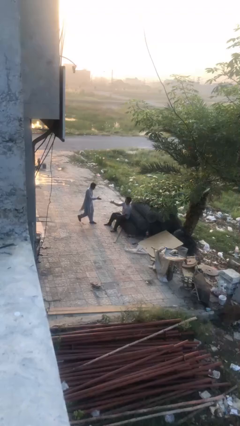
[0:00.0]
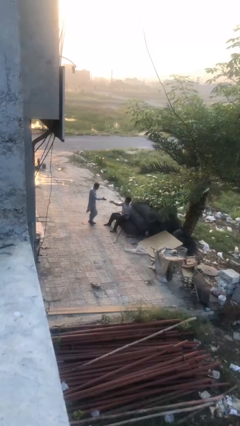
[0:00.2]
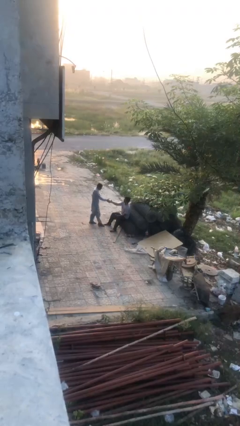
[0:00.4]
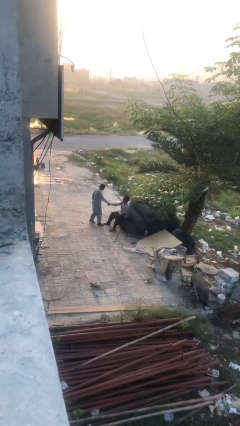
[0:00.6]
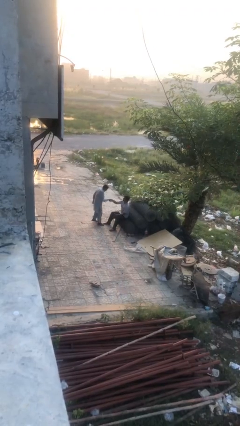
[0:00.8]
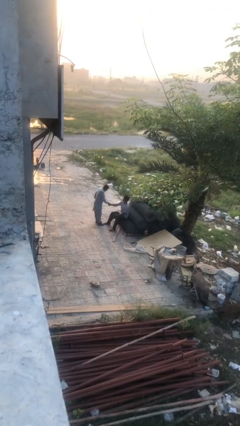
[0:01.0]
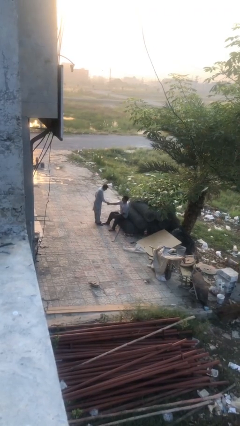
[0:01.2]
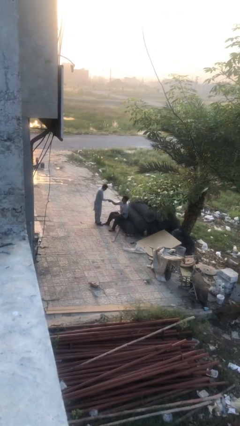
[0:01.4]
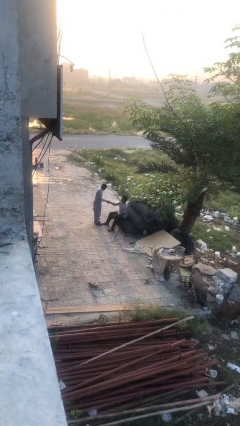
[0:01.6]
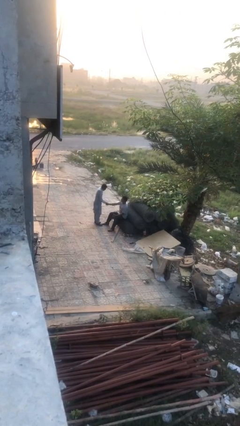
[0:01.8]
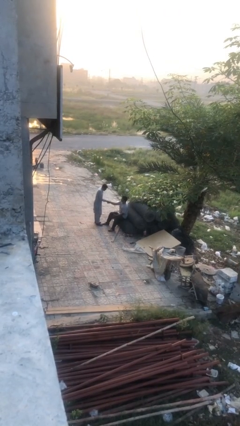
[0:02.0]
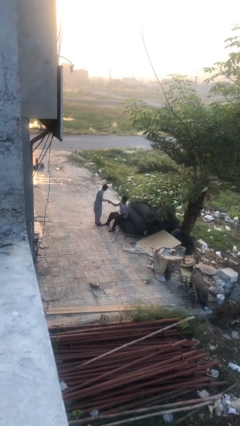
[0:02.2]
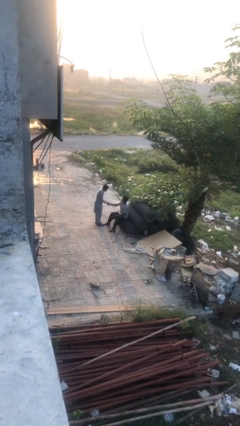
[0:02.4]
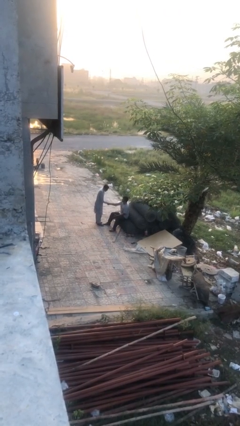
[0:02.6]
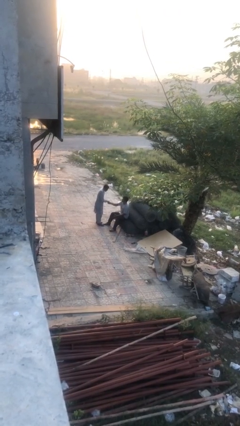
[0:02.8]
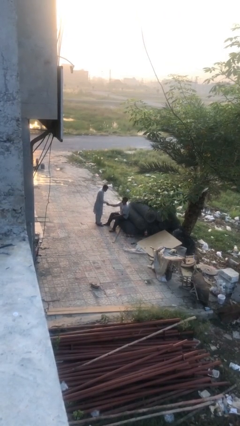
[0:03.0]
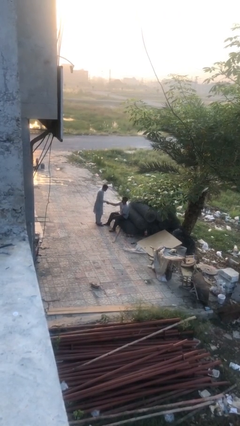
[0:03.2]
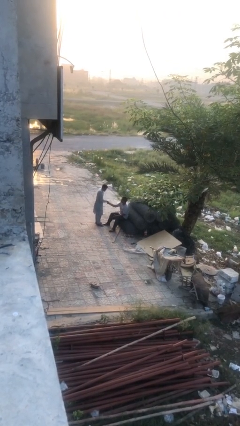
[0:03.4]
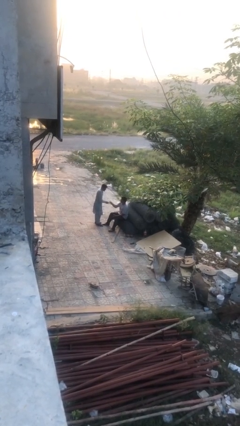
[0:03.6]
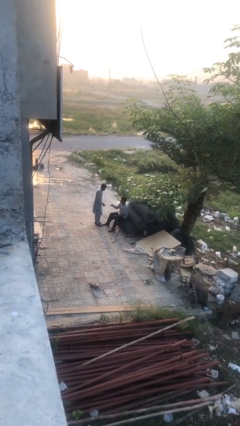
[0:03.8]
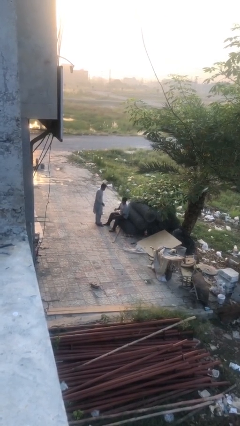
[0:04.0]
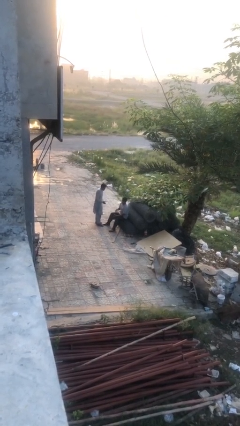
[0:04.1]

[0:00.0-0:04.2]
person shakes hand

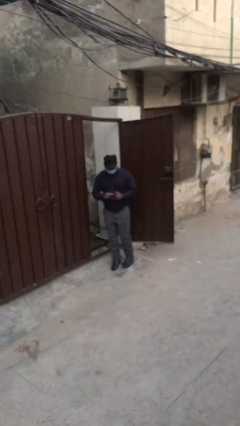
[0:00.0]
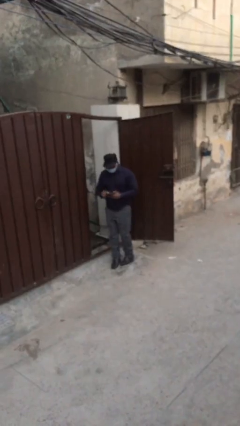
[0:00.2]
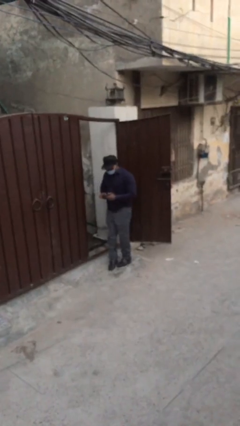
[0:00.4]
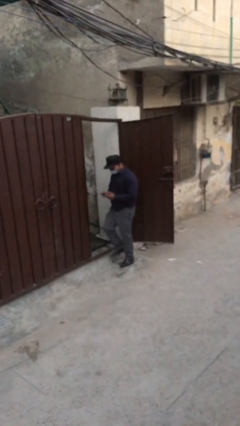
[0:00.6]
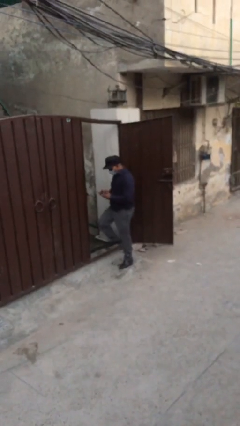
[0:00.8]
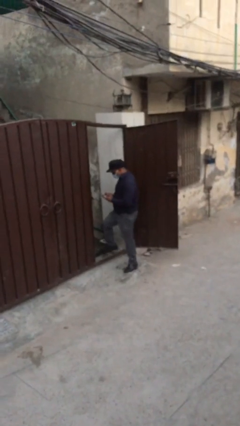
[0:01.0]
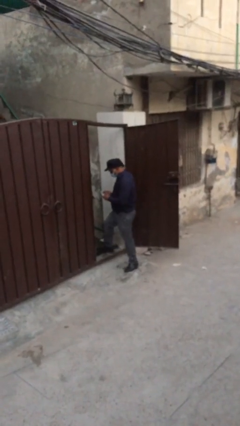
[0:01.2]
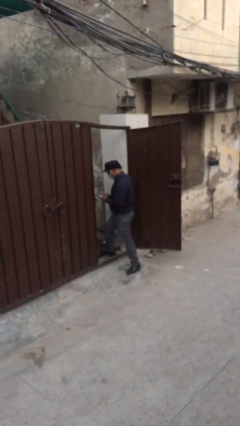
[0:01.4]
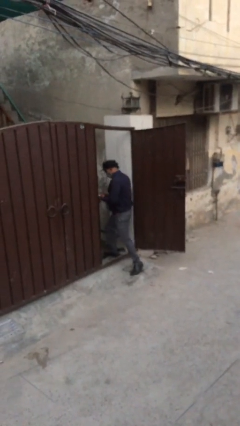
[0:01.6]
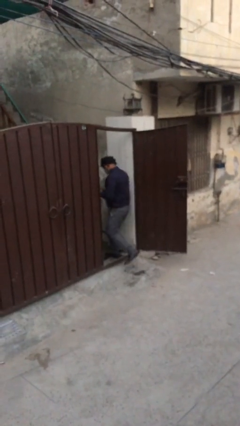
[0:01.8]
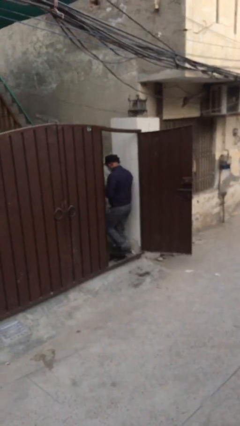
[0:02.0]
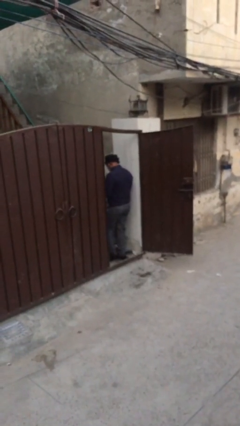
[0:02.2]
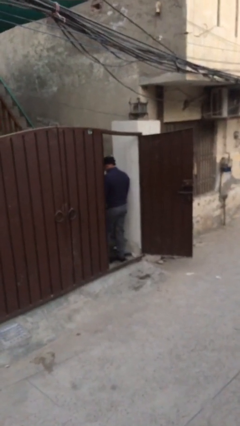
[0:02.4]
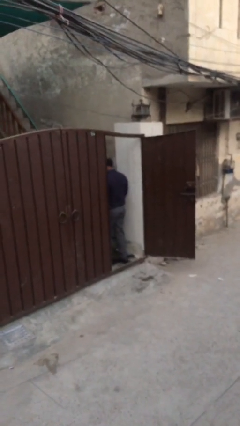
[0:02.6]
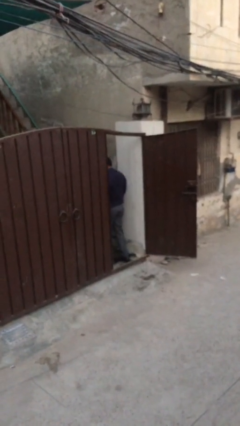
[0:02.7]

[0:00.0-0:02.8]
person exits scene through structure

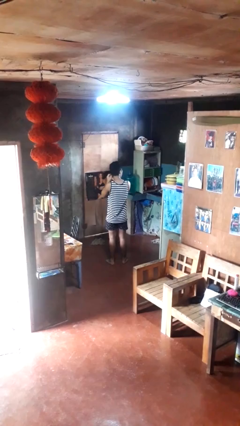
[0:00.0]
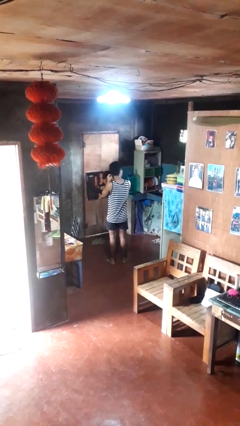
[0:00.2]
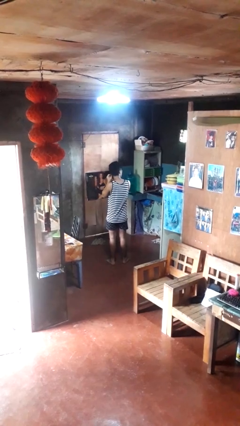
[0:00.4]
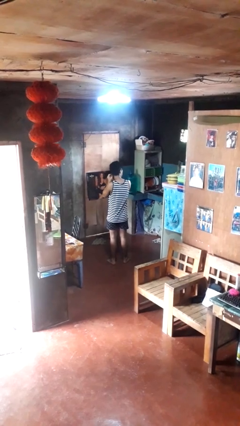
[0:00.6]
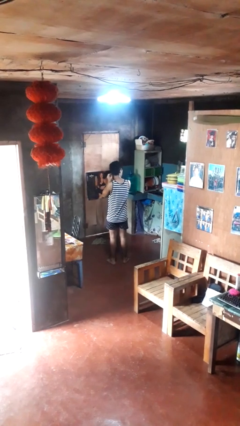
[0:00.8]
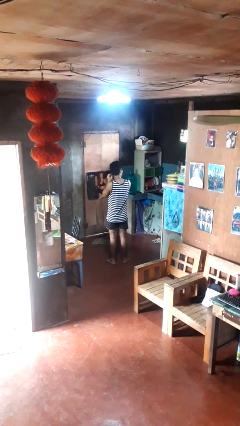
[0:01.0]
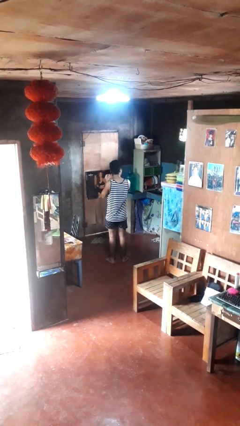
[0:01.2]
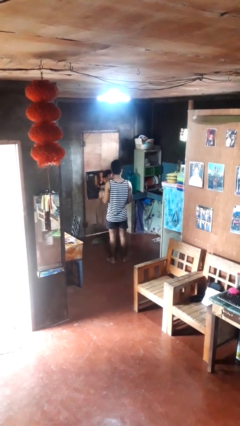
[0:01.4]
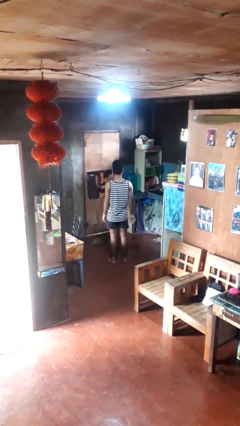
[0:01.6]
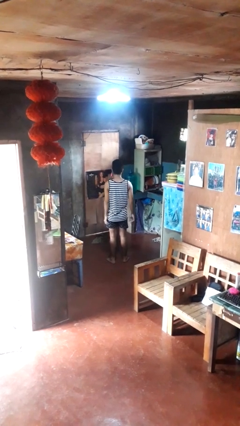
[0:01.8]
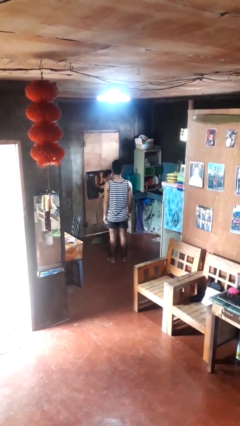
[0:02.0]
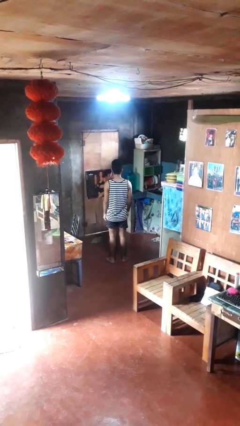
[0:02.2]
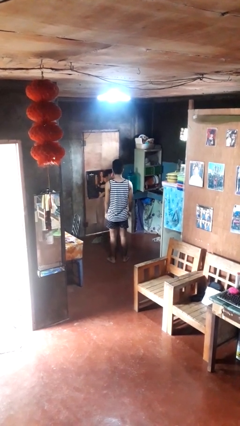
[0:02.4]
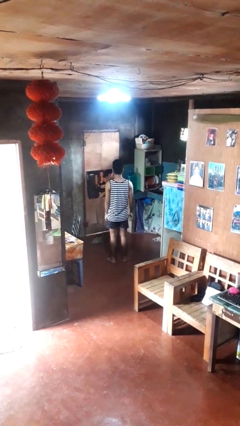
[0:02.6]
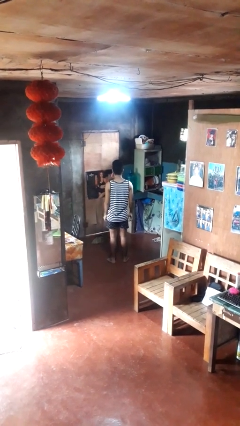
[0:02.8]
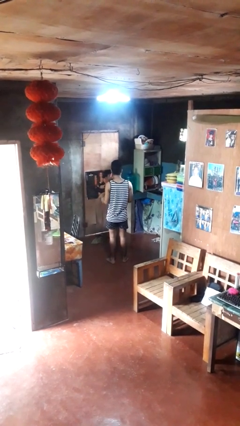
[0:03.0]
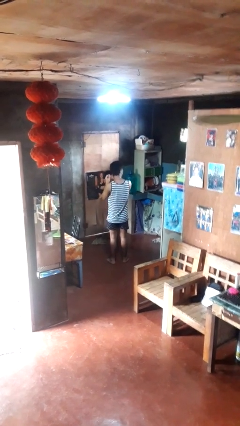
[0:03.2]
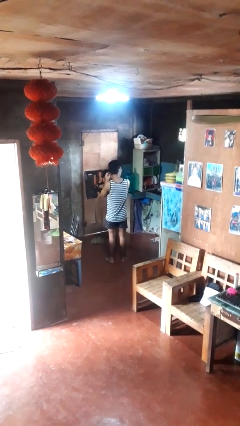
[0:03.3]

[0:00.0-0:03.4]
person puts on earrings

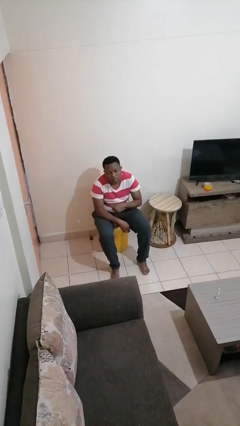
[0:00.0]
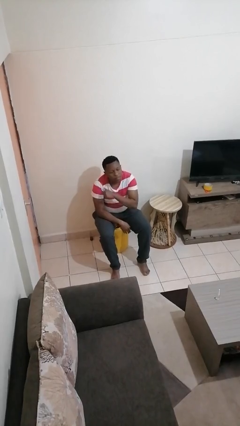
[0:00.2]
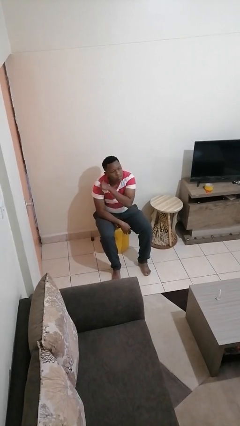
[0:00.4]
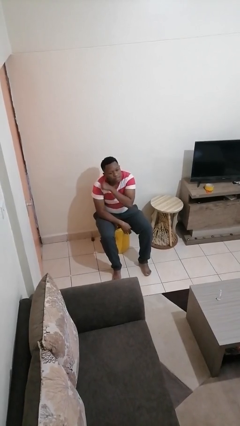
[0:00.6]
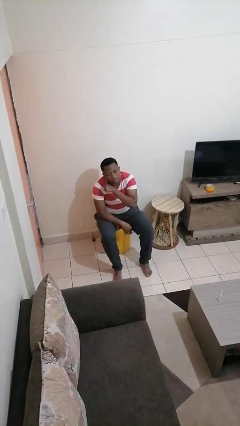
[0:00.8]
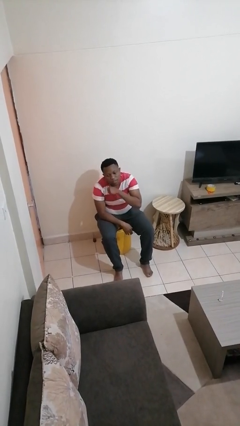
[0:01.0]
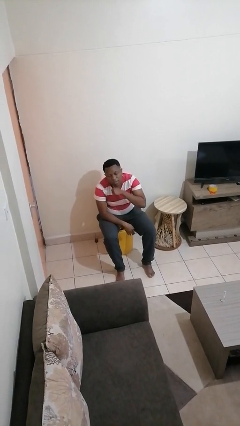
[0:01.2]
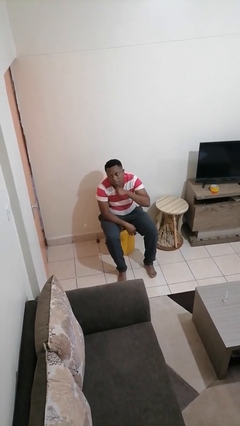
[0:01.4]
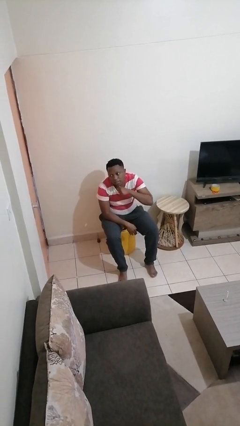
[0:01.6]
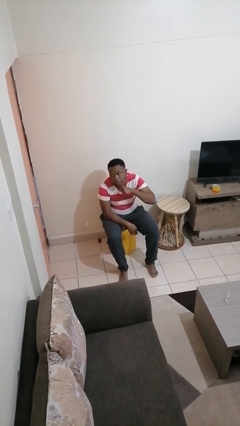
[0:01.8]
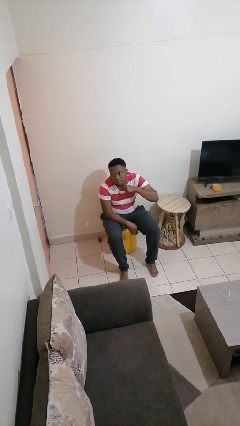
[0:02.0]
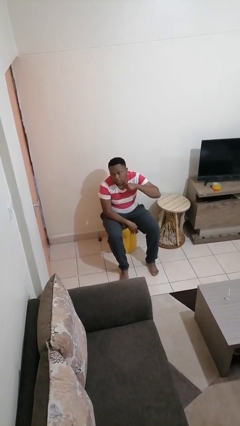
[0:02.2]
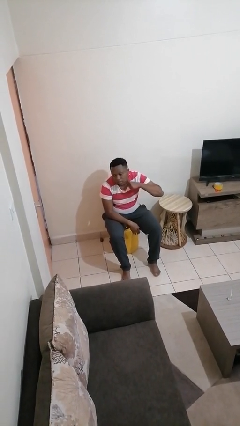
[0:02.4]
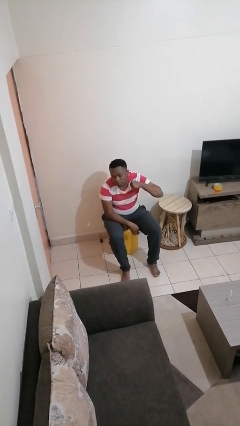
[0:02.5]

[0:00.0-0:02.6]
person gestures cut

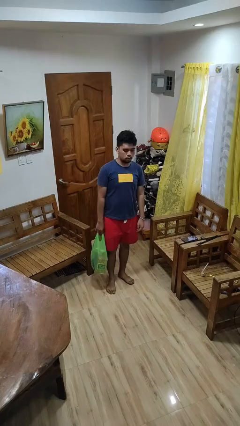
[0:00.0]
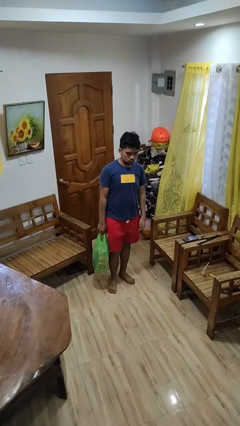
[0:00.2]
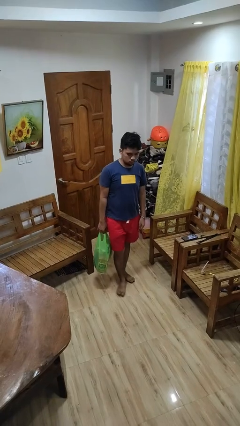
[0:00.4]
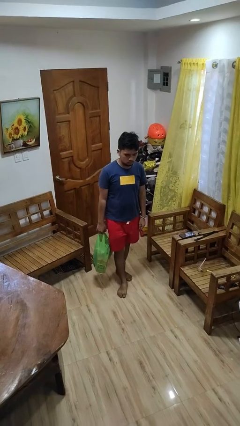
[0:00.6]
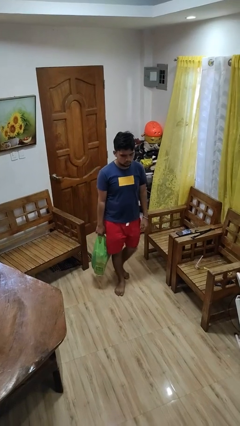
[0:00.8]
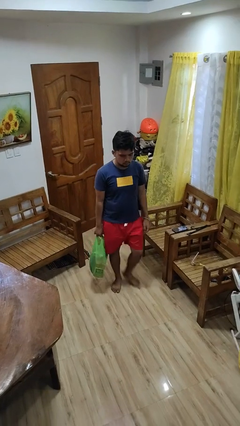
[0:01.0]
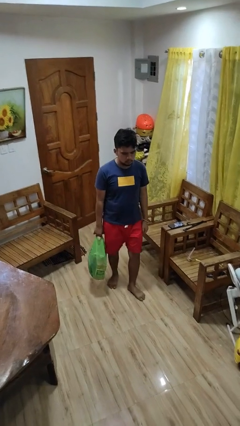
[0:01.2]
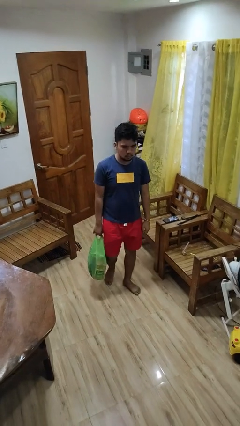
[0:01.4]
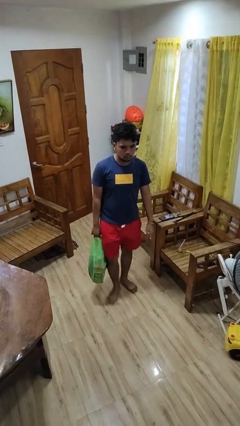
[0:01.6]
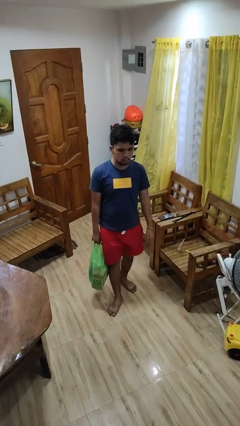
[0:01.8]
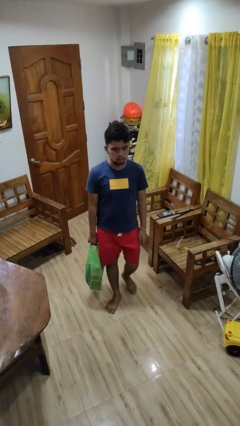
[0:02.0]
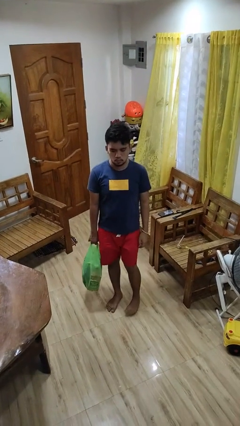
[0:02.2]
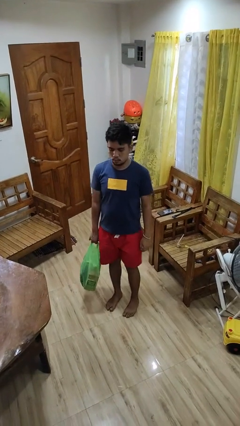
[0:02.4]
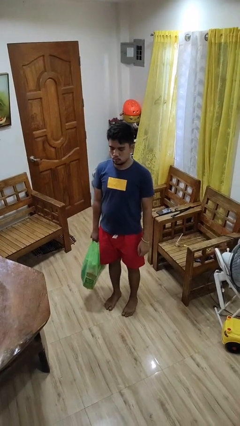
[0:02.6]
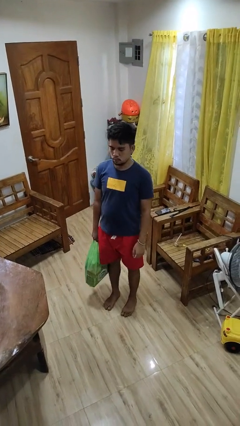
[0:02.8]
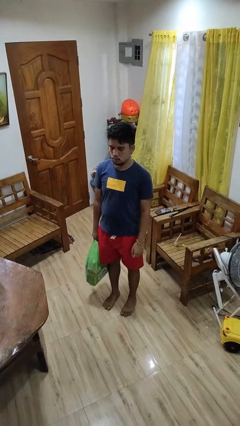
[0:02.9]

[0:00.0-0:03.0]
person carries groceries

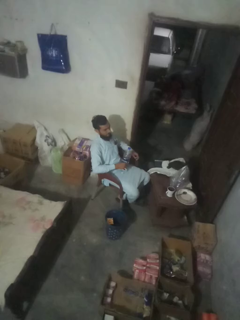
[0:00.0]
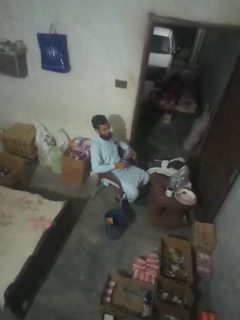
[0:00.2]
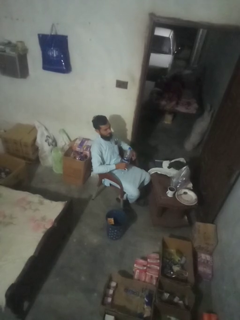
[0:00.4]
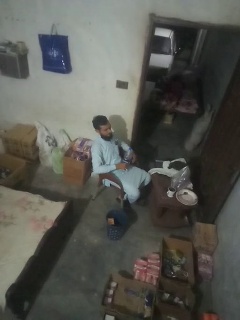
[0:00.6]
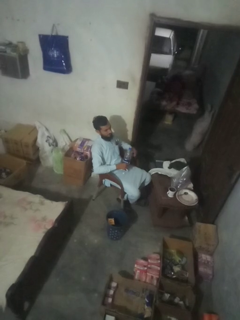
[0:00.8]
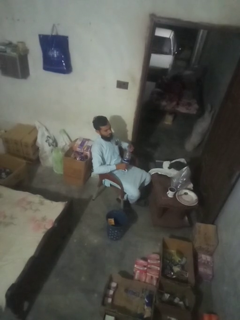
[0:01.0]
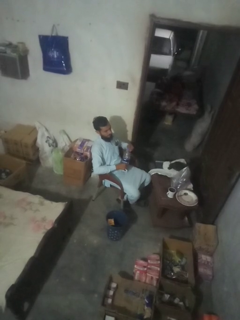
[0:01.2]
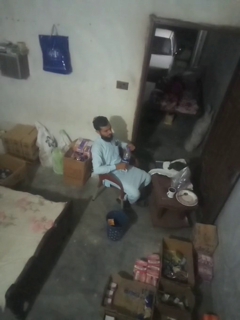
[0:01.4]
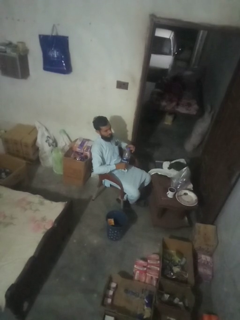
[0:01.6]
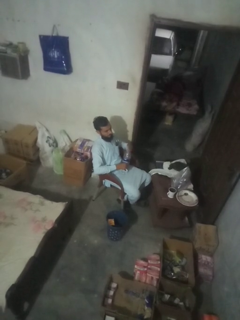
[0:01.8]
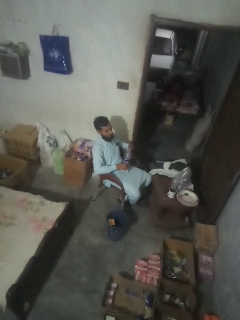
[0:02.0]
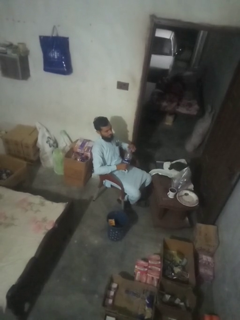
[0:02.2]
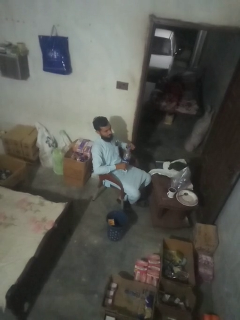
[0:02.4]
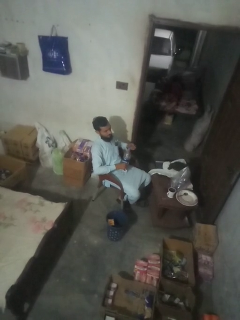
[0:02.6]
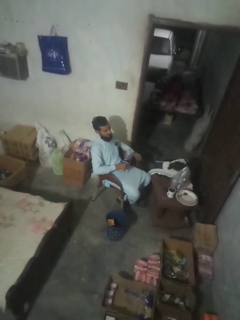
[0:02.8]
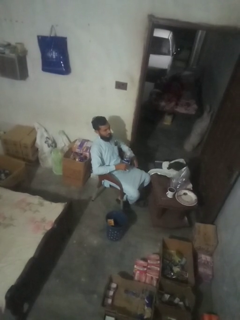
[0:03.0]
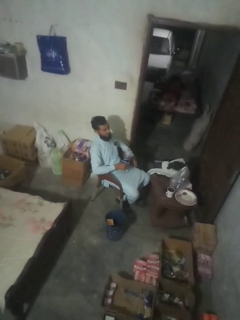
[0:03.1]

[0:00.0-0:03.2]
person unscrews lid from bottle
